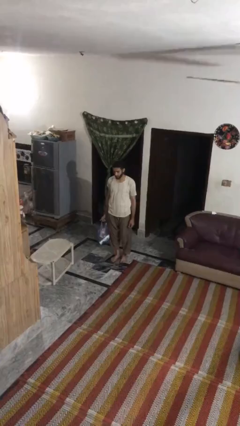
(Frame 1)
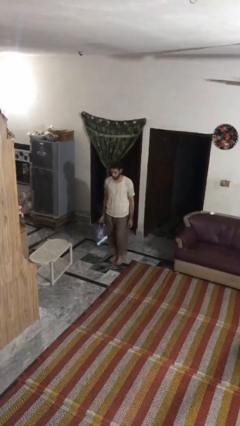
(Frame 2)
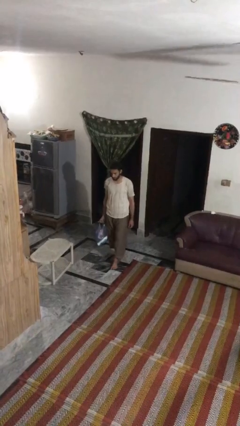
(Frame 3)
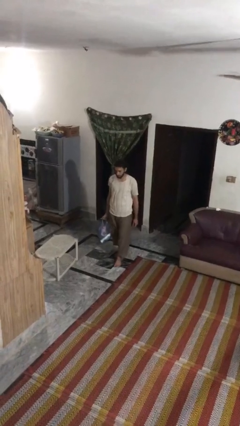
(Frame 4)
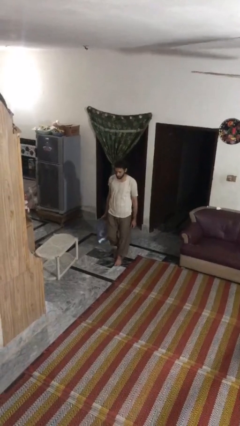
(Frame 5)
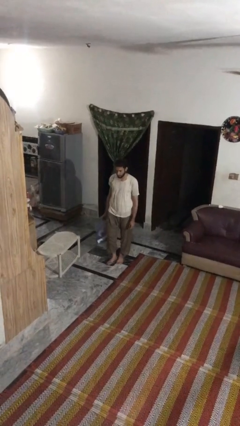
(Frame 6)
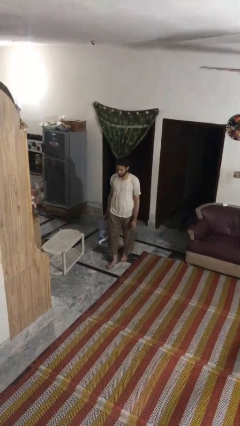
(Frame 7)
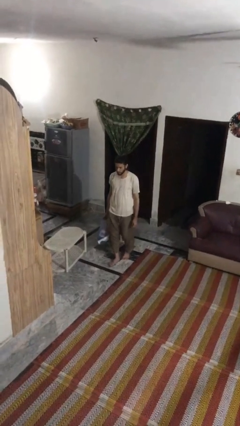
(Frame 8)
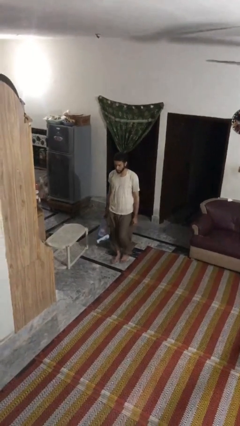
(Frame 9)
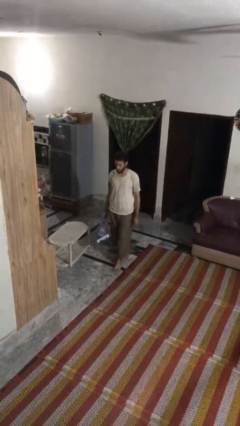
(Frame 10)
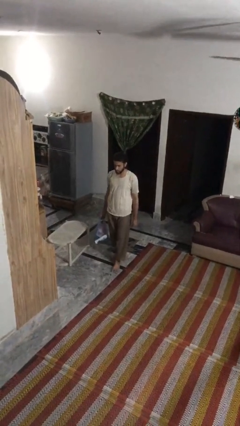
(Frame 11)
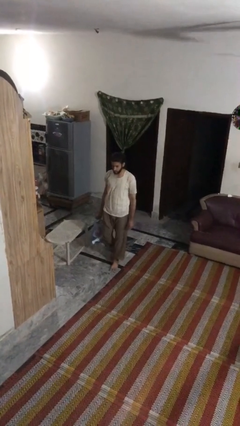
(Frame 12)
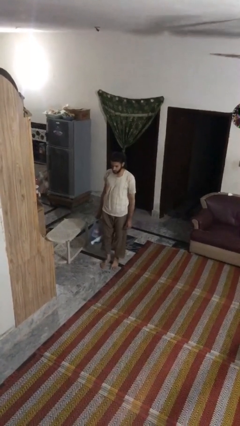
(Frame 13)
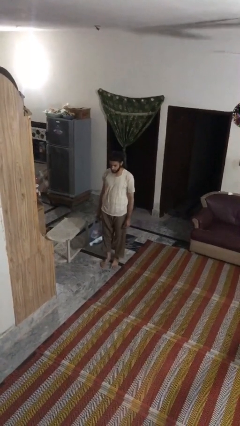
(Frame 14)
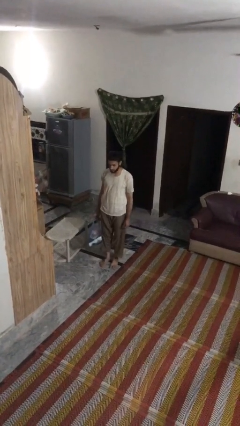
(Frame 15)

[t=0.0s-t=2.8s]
person carries groceries

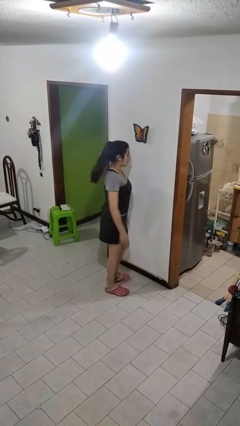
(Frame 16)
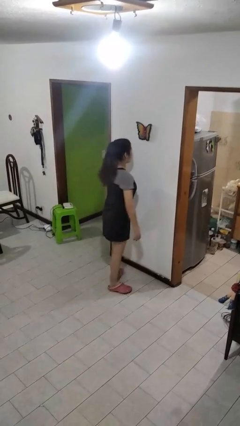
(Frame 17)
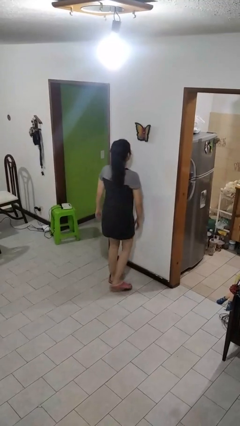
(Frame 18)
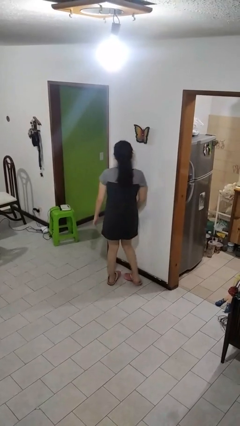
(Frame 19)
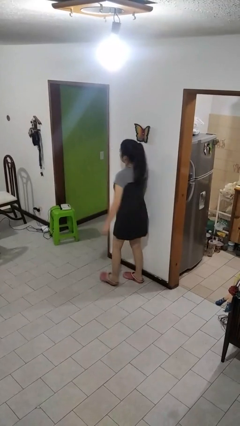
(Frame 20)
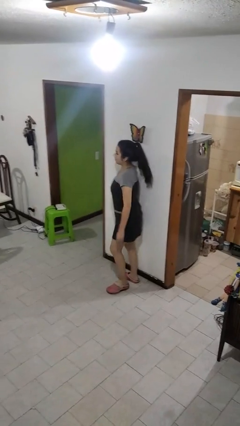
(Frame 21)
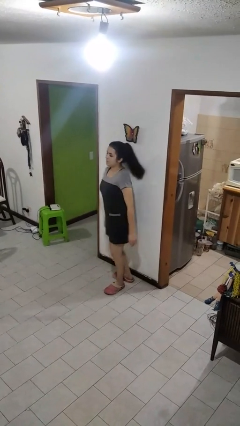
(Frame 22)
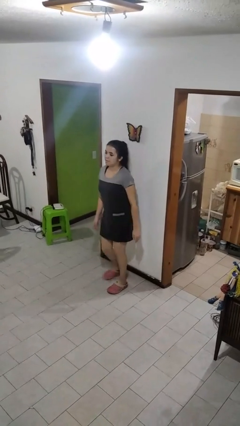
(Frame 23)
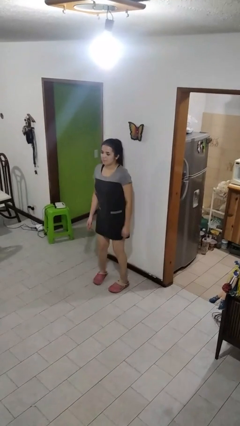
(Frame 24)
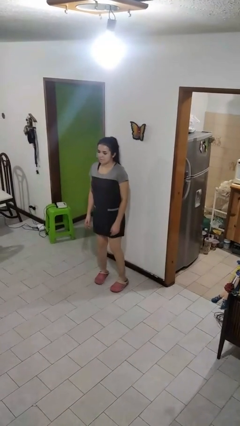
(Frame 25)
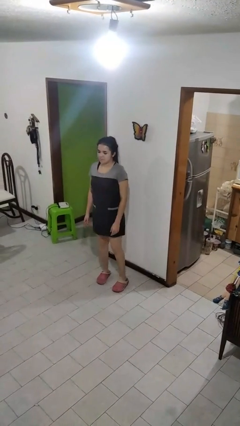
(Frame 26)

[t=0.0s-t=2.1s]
person twirls

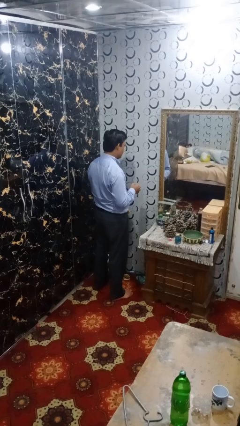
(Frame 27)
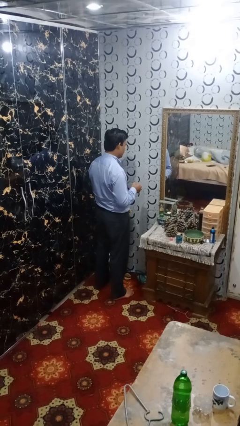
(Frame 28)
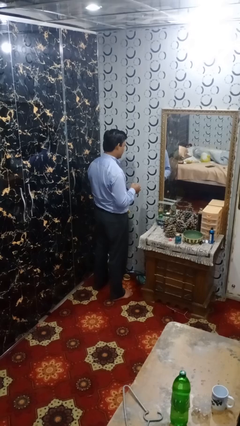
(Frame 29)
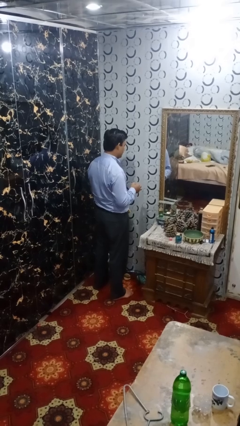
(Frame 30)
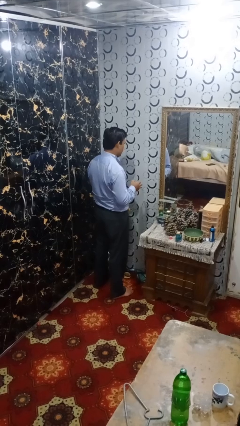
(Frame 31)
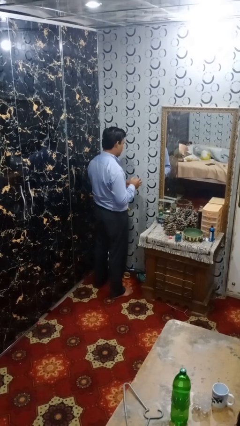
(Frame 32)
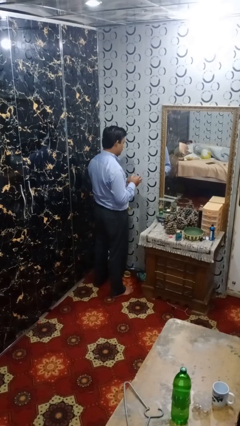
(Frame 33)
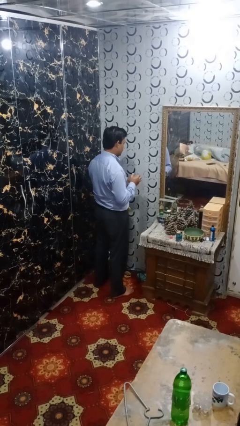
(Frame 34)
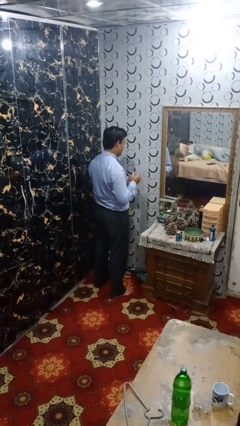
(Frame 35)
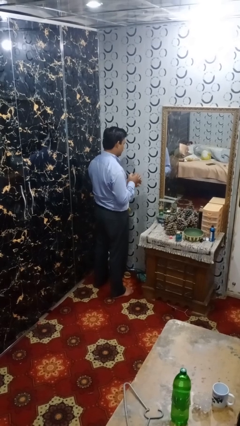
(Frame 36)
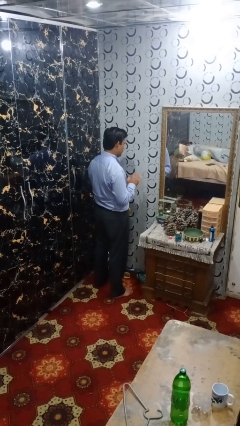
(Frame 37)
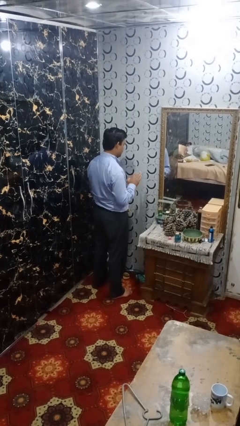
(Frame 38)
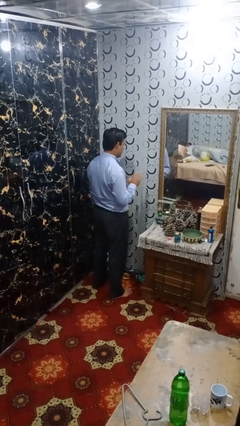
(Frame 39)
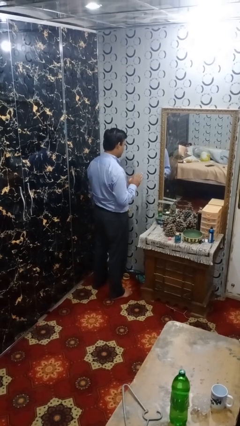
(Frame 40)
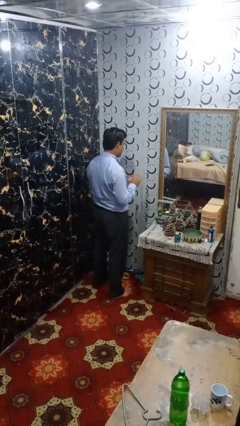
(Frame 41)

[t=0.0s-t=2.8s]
person puts on ring

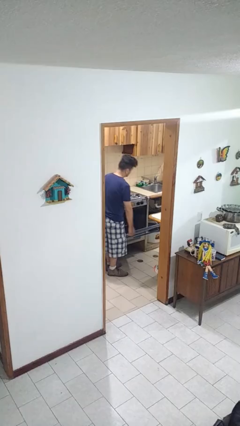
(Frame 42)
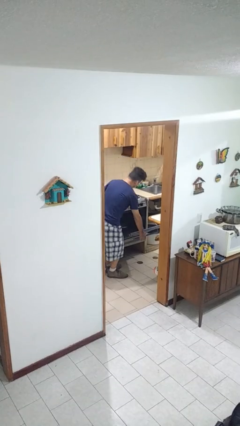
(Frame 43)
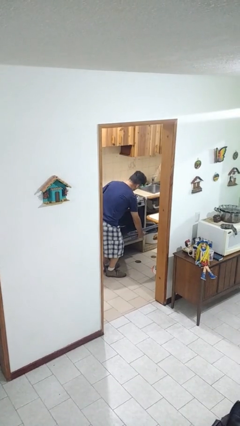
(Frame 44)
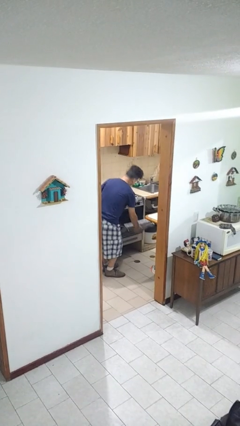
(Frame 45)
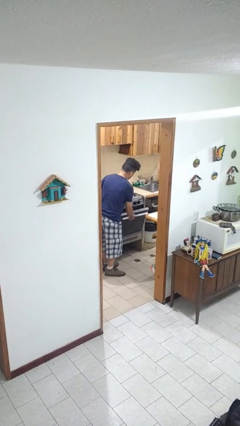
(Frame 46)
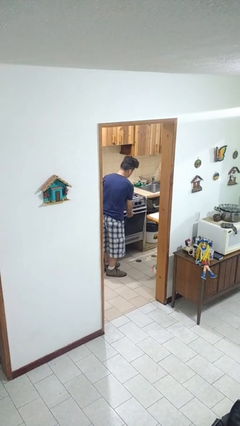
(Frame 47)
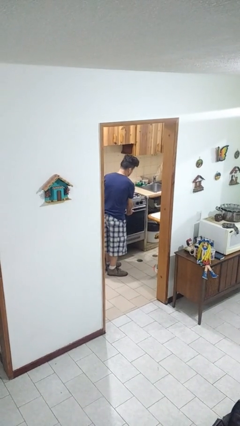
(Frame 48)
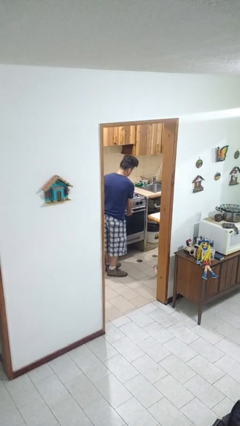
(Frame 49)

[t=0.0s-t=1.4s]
person closes oven door

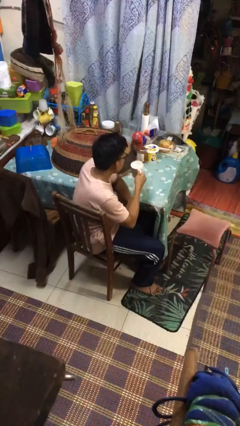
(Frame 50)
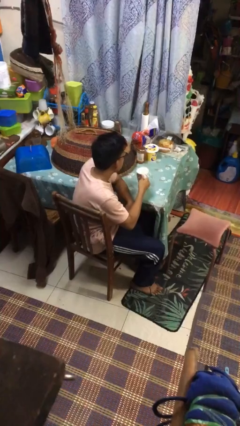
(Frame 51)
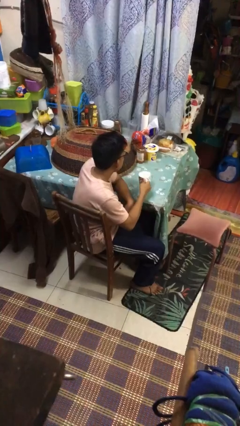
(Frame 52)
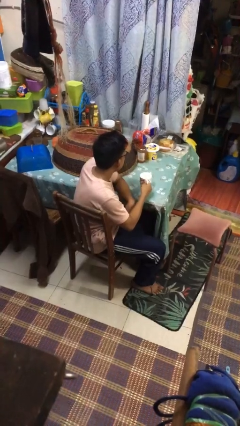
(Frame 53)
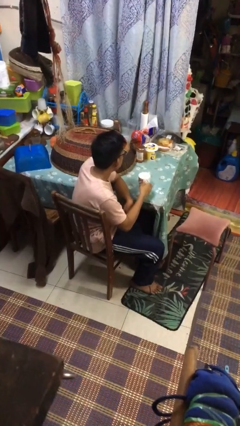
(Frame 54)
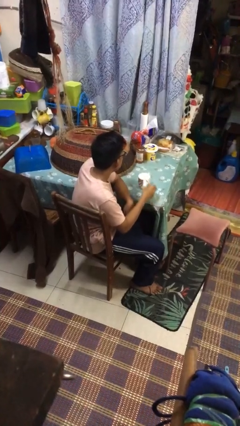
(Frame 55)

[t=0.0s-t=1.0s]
person puts down object on table

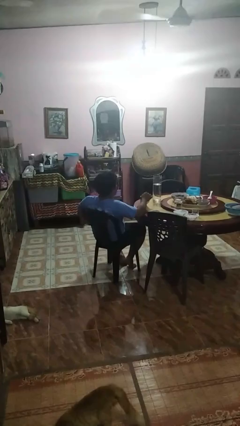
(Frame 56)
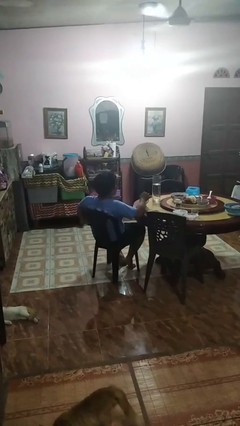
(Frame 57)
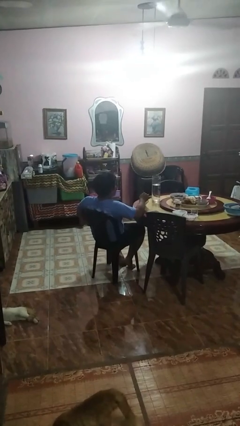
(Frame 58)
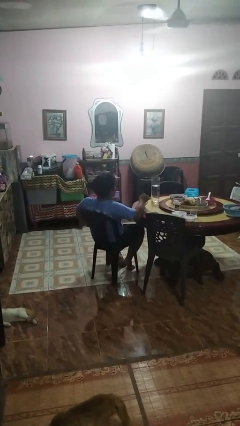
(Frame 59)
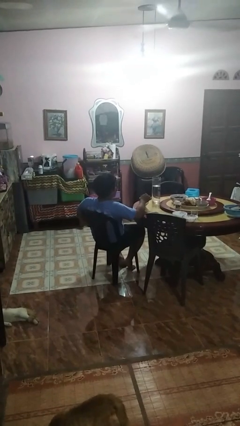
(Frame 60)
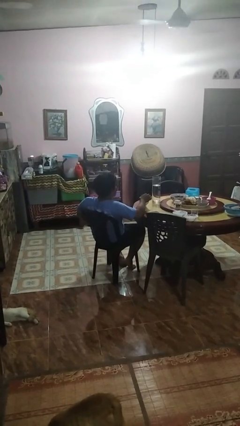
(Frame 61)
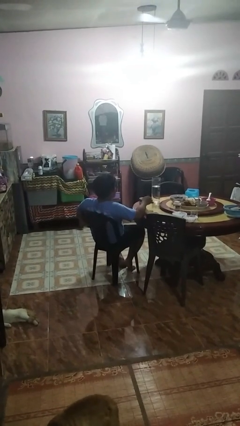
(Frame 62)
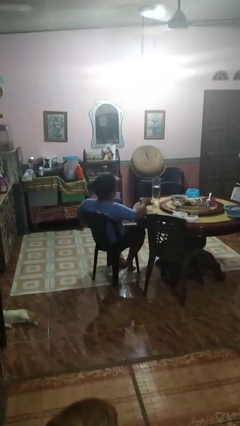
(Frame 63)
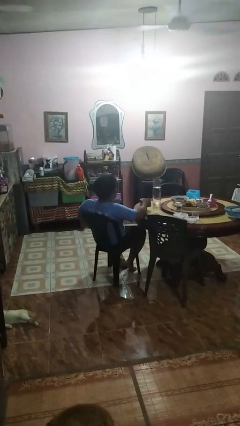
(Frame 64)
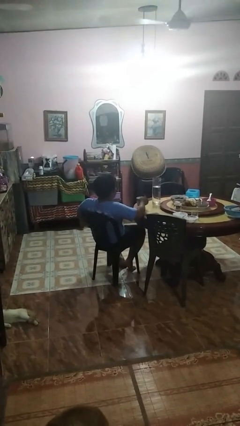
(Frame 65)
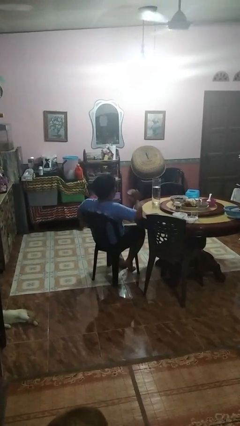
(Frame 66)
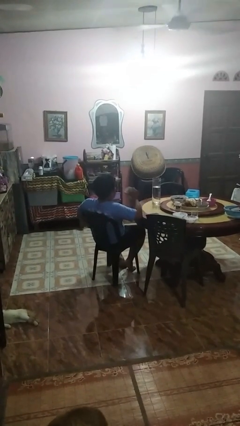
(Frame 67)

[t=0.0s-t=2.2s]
person stirs mug

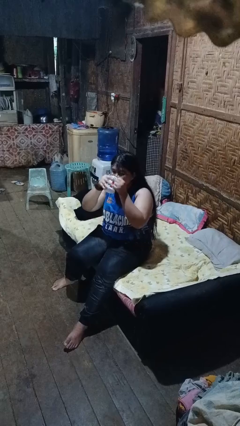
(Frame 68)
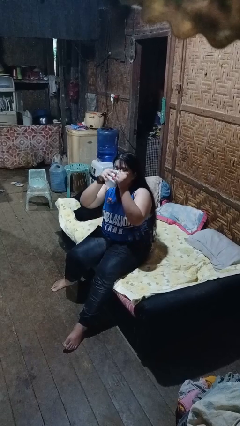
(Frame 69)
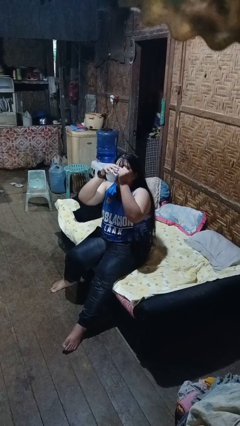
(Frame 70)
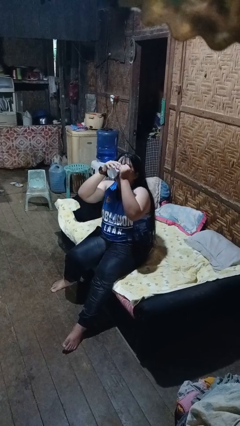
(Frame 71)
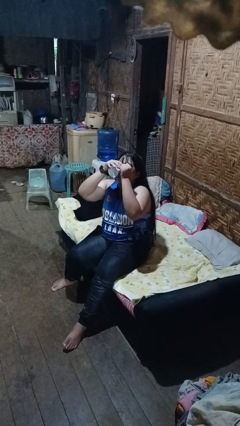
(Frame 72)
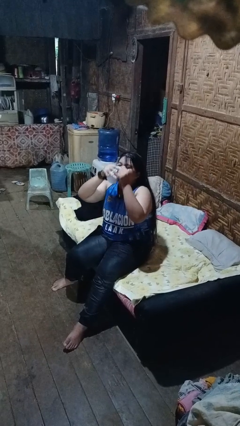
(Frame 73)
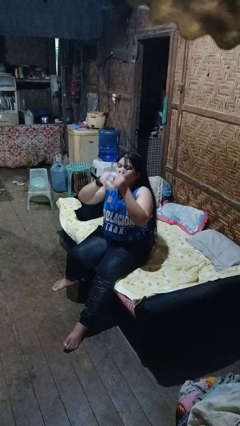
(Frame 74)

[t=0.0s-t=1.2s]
person drinks from mug

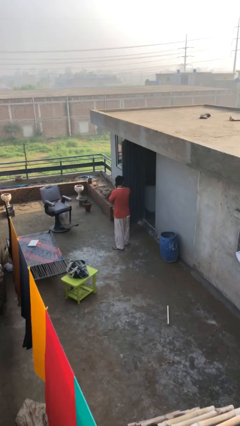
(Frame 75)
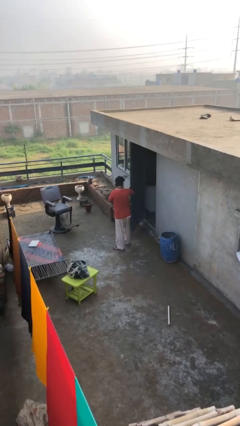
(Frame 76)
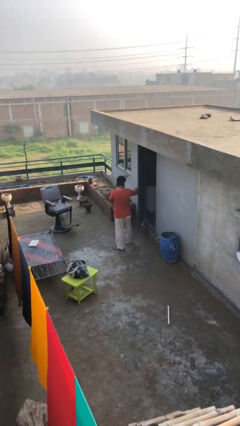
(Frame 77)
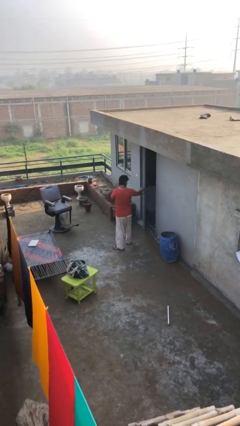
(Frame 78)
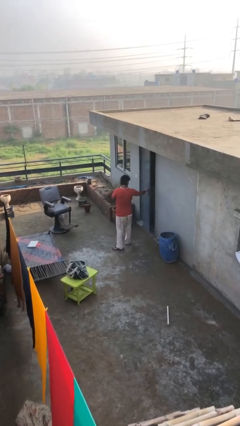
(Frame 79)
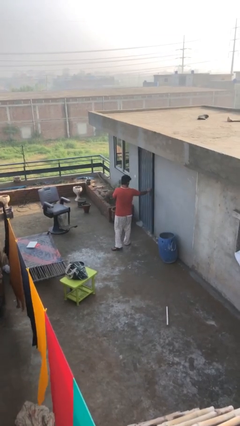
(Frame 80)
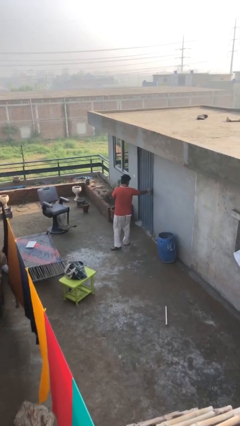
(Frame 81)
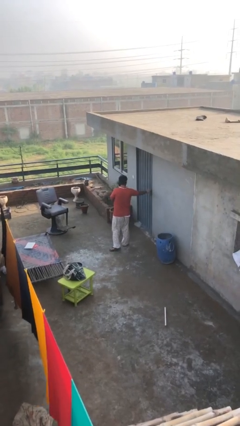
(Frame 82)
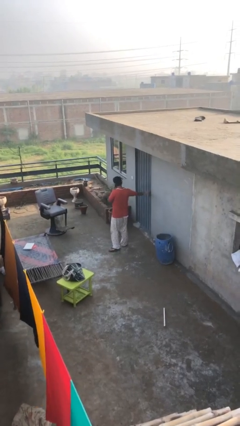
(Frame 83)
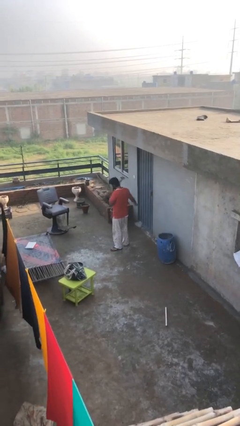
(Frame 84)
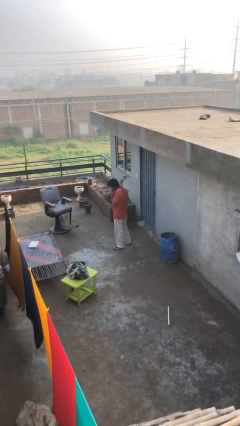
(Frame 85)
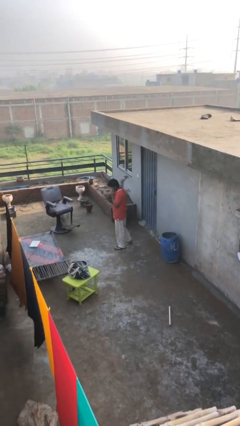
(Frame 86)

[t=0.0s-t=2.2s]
person closes facility door

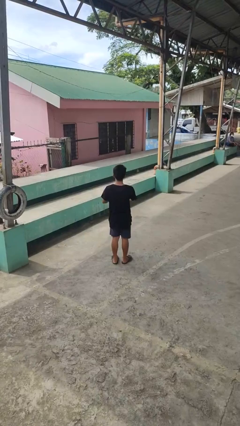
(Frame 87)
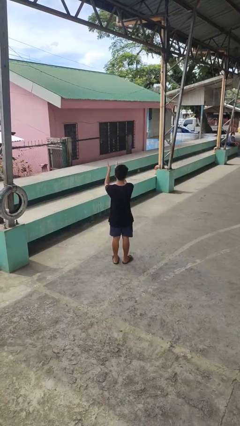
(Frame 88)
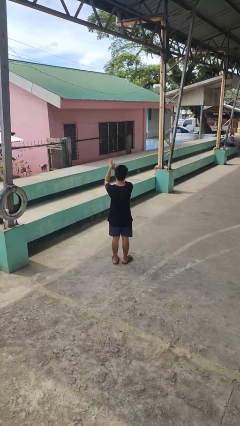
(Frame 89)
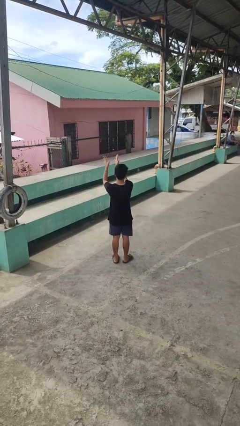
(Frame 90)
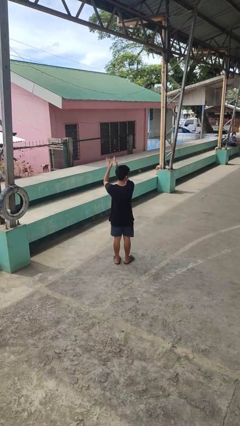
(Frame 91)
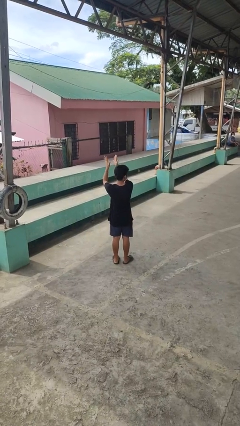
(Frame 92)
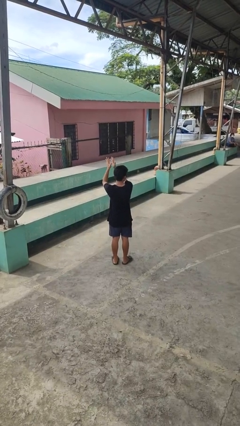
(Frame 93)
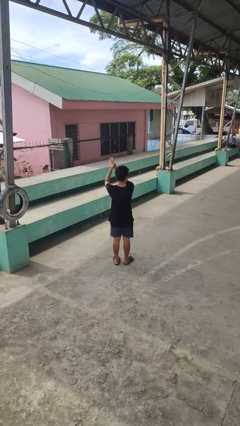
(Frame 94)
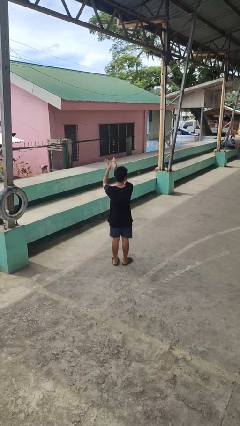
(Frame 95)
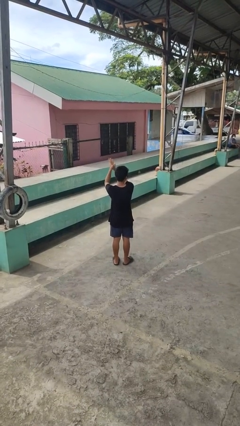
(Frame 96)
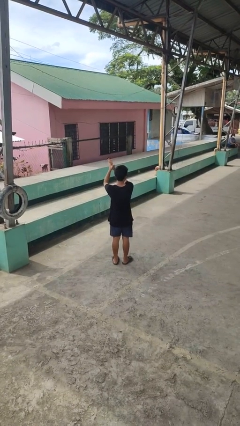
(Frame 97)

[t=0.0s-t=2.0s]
person claps hands
